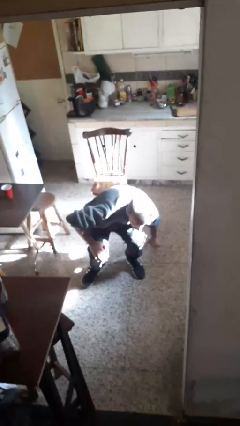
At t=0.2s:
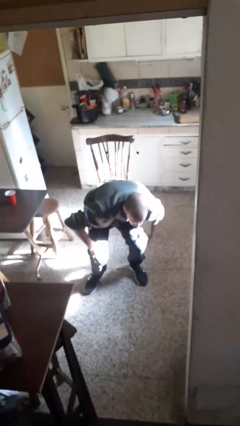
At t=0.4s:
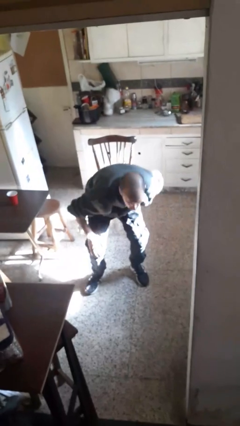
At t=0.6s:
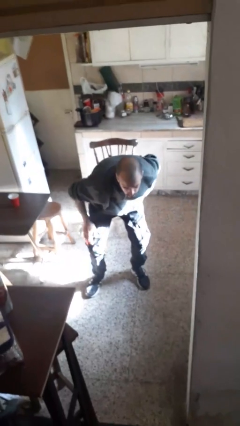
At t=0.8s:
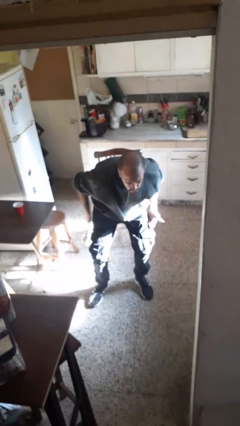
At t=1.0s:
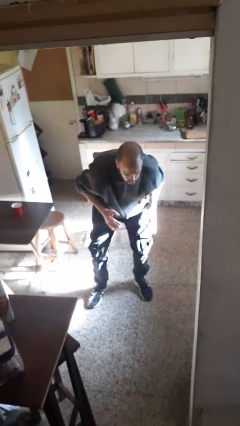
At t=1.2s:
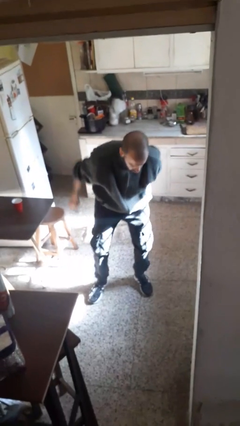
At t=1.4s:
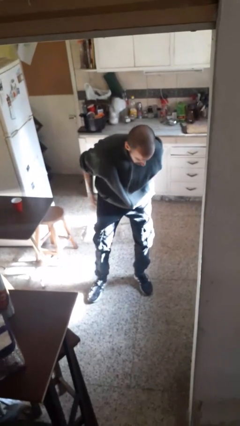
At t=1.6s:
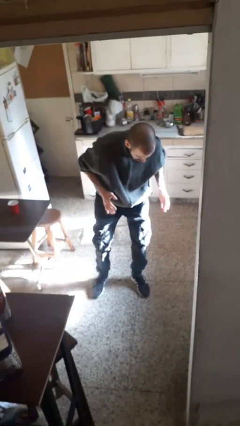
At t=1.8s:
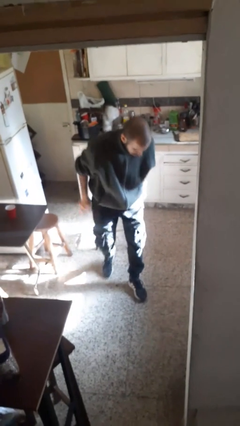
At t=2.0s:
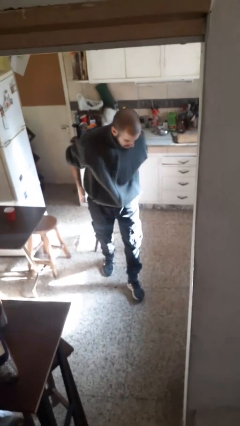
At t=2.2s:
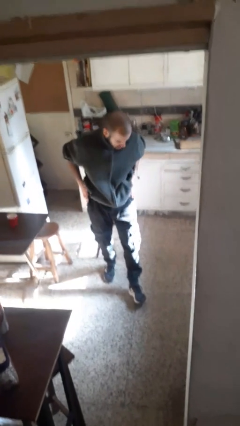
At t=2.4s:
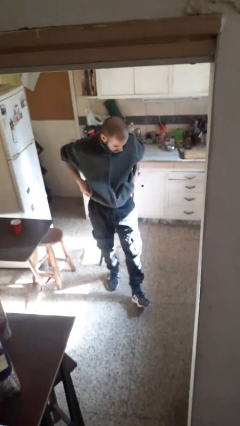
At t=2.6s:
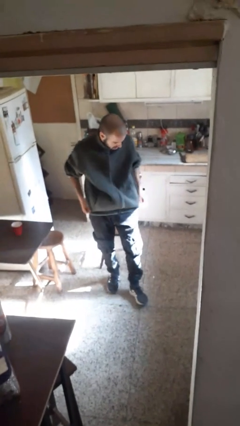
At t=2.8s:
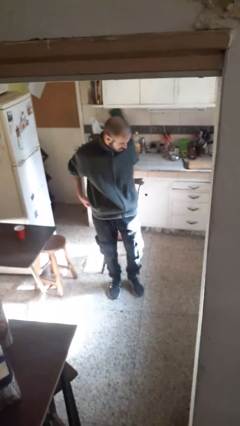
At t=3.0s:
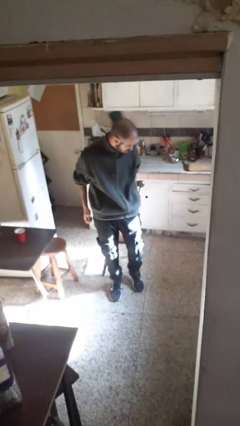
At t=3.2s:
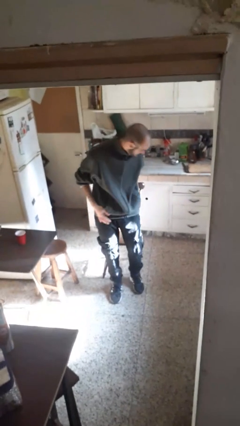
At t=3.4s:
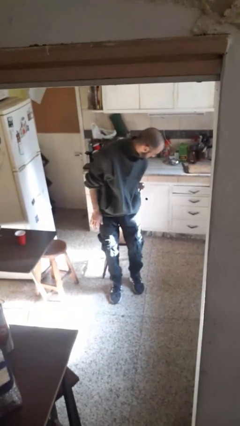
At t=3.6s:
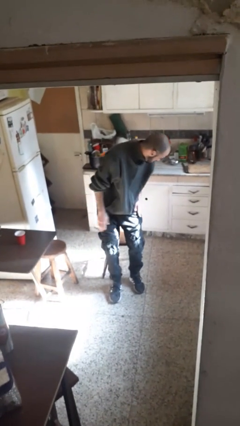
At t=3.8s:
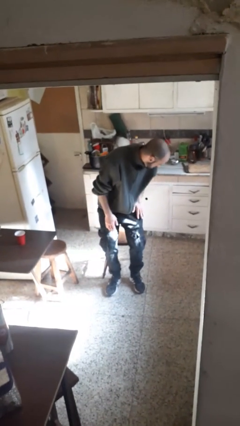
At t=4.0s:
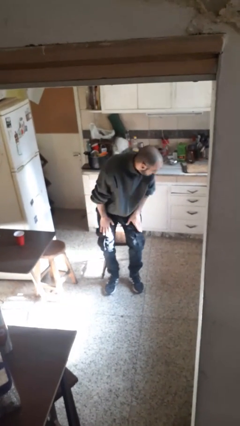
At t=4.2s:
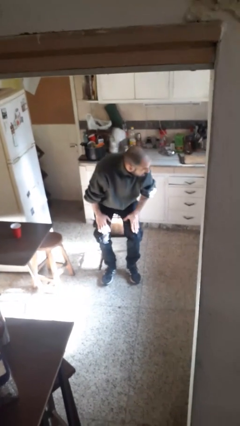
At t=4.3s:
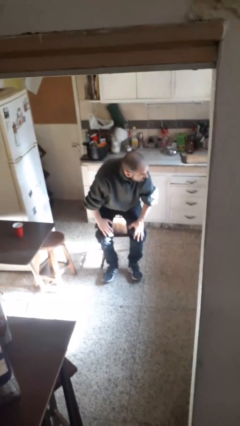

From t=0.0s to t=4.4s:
person stands up from floor

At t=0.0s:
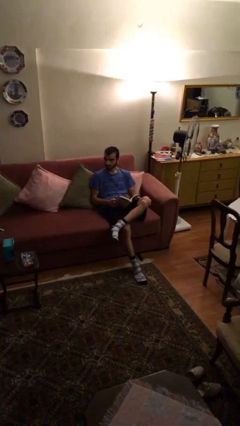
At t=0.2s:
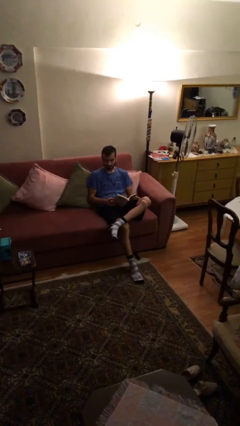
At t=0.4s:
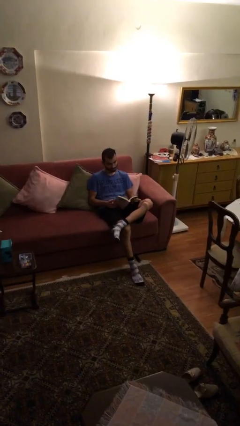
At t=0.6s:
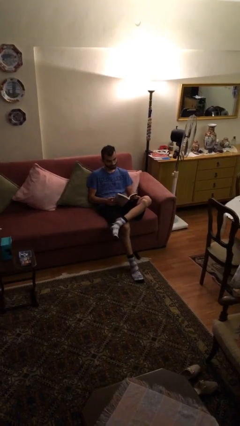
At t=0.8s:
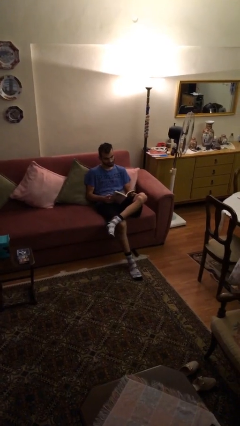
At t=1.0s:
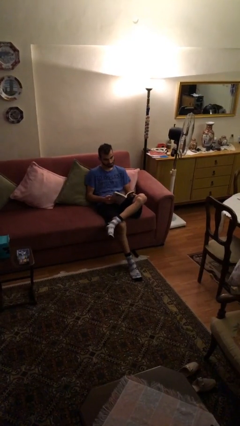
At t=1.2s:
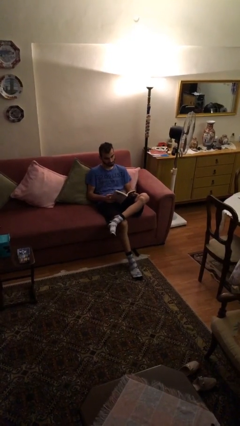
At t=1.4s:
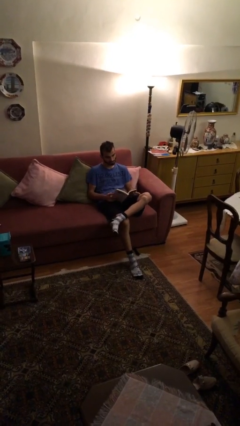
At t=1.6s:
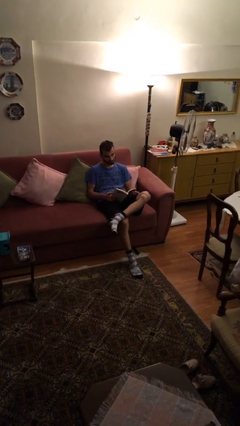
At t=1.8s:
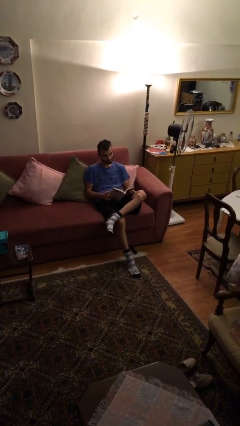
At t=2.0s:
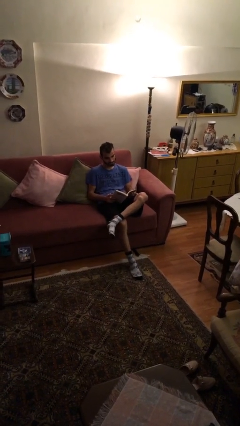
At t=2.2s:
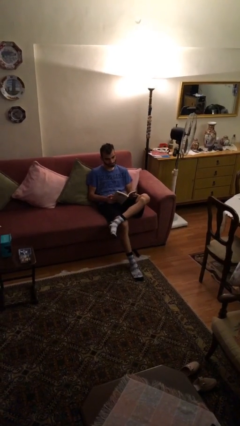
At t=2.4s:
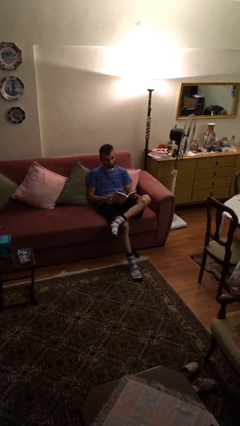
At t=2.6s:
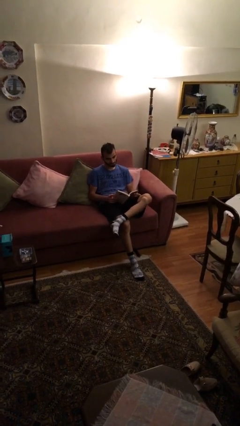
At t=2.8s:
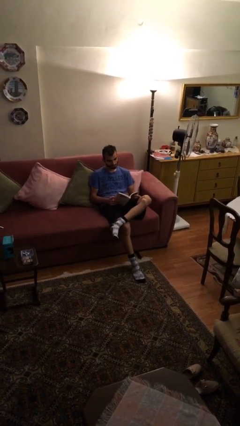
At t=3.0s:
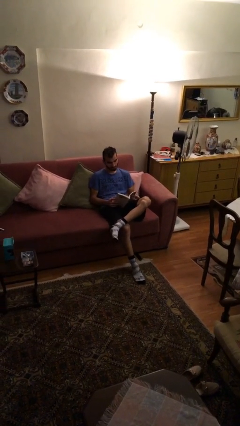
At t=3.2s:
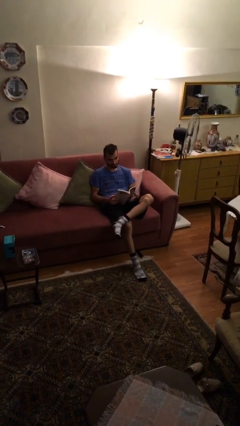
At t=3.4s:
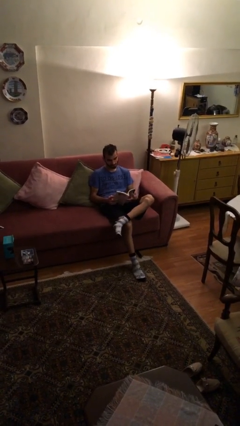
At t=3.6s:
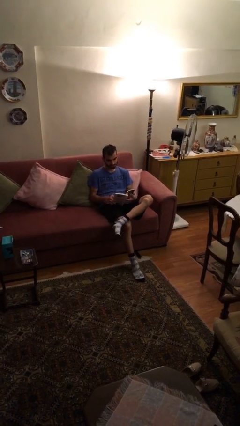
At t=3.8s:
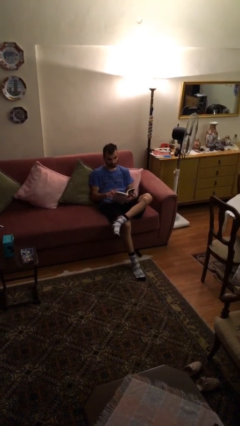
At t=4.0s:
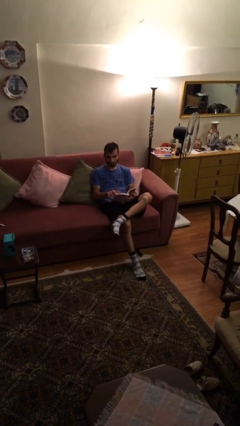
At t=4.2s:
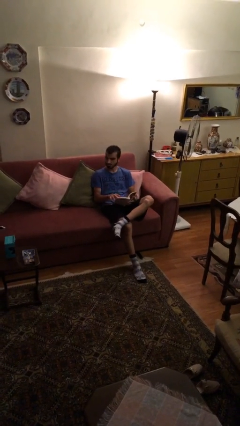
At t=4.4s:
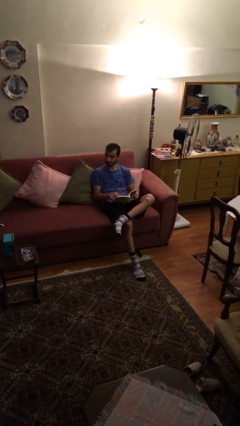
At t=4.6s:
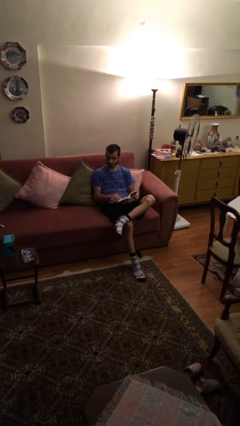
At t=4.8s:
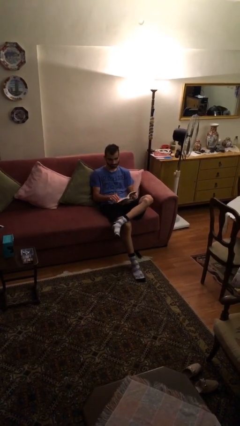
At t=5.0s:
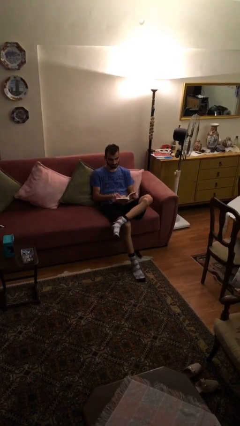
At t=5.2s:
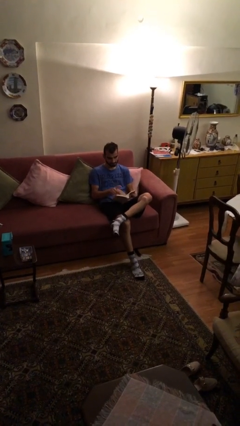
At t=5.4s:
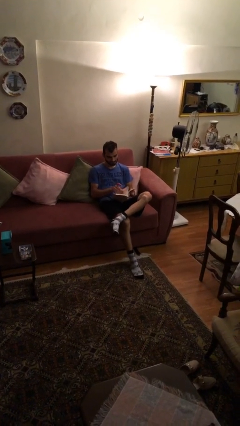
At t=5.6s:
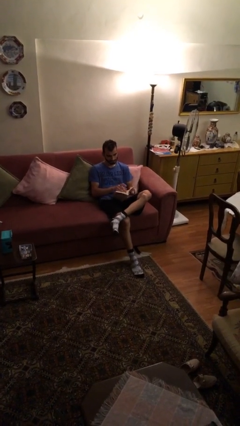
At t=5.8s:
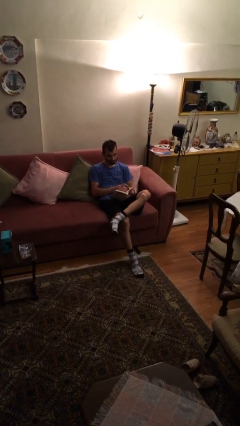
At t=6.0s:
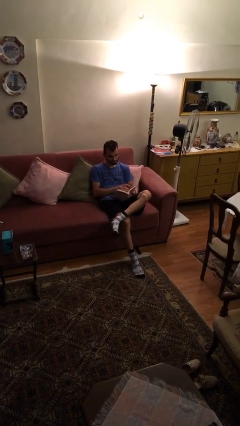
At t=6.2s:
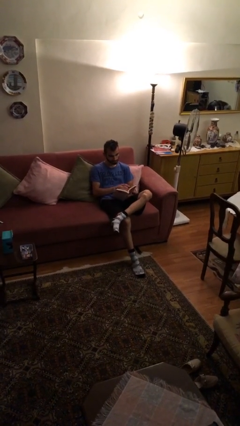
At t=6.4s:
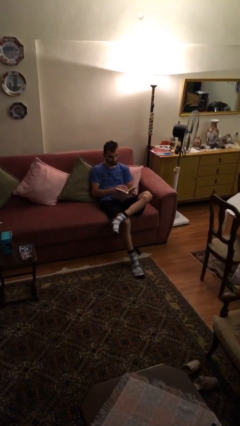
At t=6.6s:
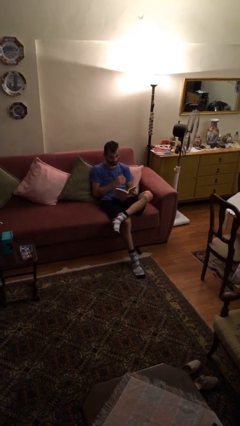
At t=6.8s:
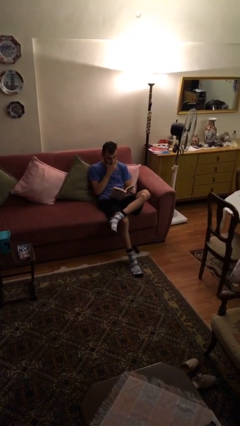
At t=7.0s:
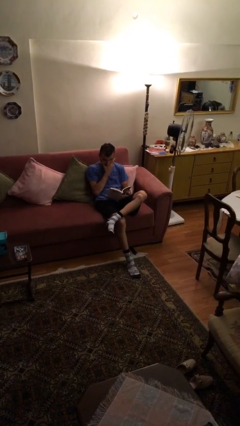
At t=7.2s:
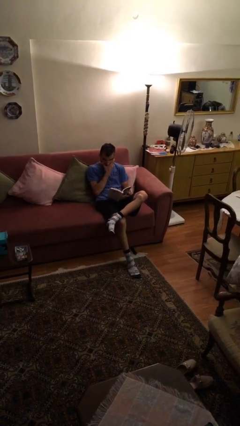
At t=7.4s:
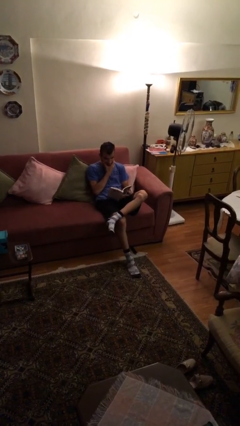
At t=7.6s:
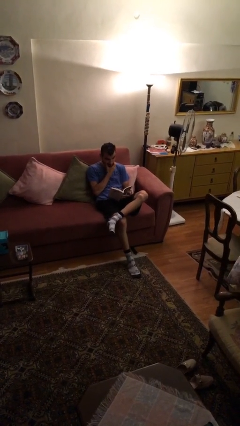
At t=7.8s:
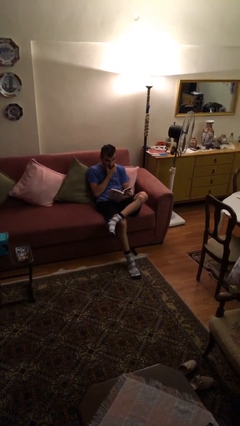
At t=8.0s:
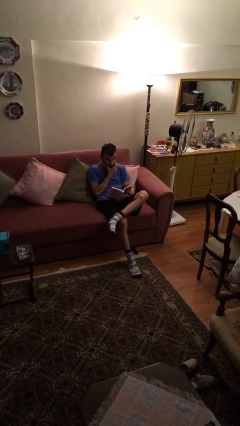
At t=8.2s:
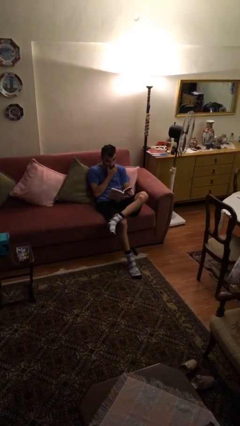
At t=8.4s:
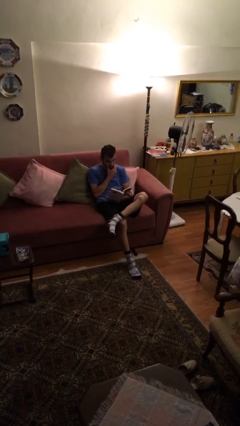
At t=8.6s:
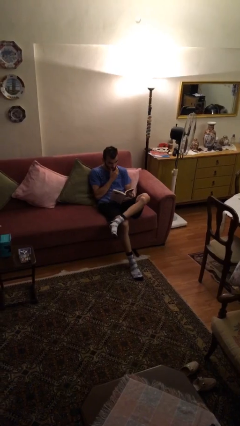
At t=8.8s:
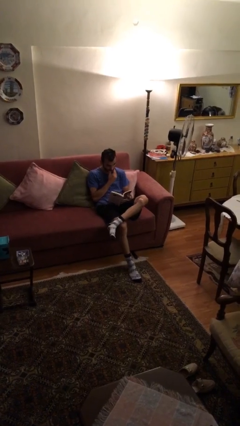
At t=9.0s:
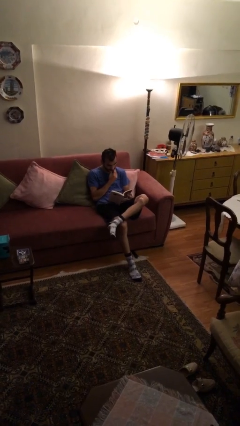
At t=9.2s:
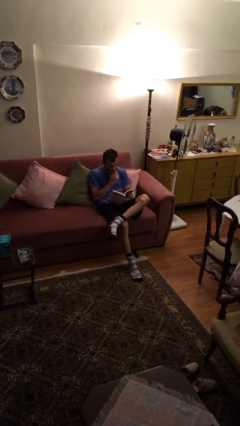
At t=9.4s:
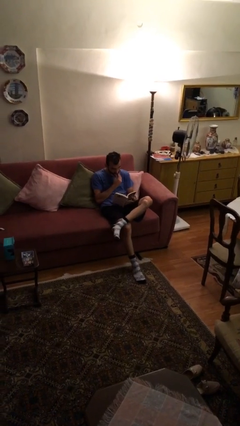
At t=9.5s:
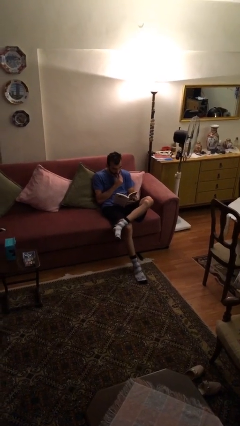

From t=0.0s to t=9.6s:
person reads document

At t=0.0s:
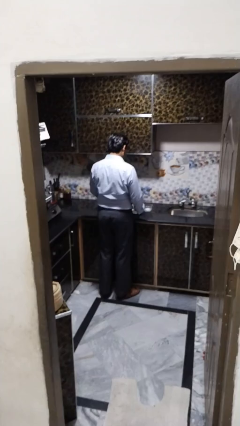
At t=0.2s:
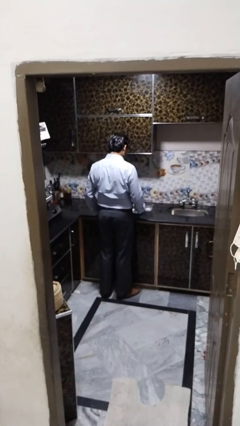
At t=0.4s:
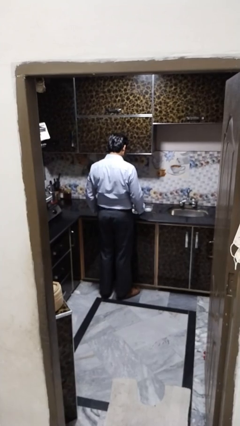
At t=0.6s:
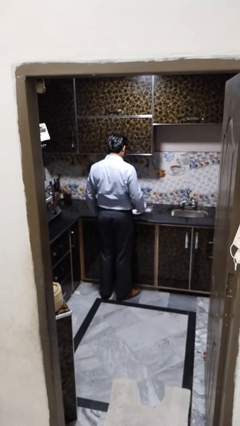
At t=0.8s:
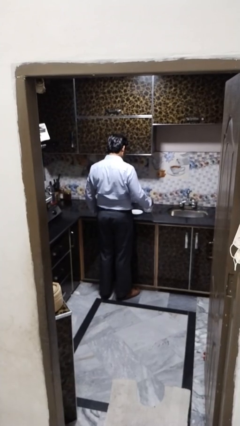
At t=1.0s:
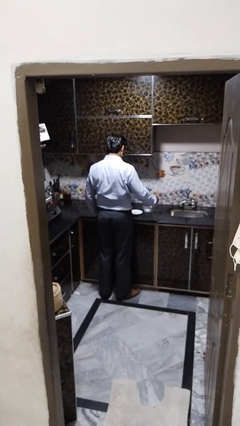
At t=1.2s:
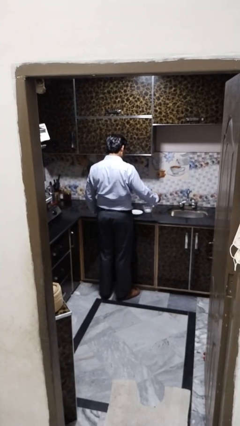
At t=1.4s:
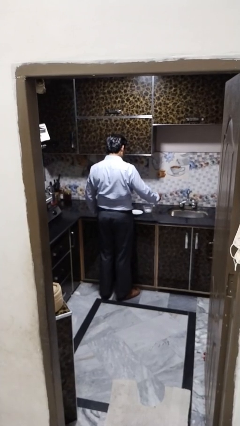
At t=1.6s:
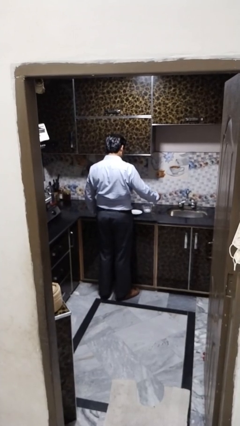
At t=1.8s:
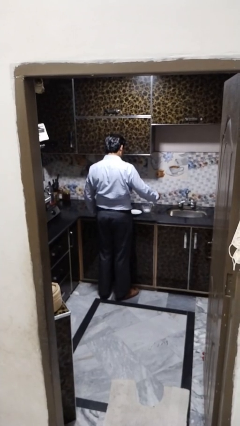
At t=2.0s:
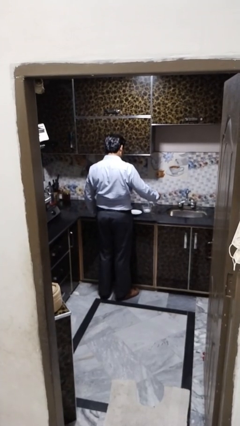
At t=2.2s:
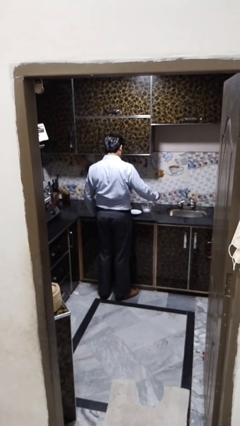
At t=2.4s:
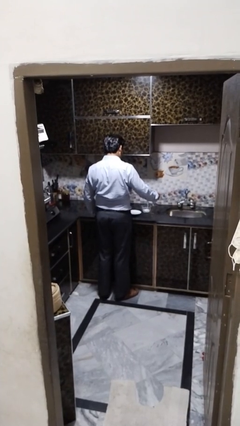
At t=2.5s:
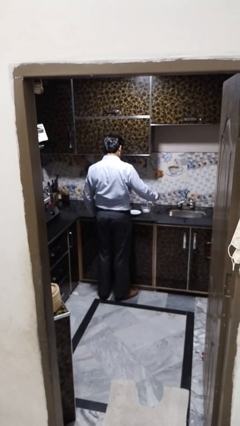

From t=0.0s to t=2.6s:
person pours into bowl

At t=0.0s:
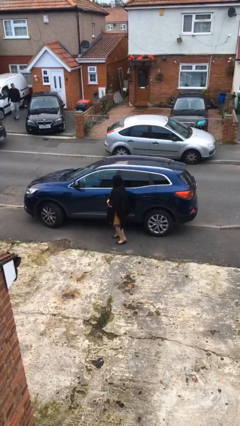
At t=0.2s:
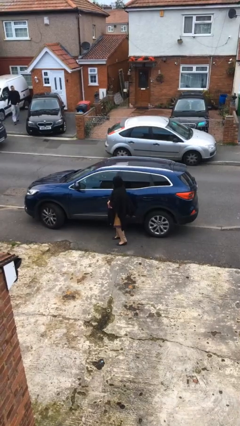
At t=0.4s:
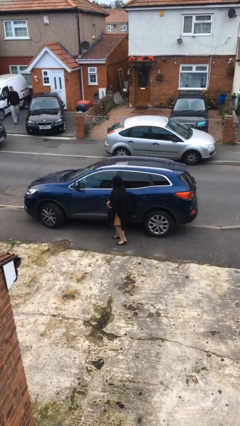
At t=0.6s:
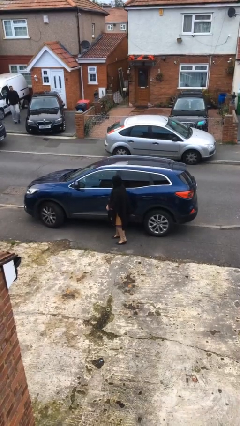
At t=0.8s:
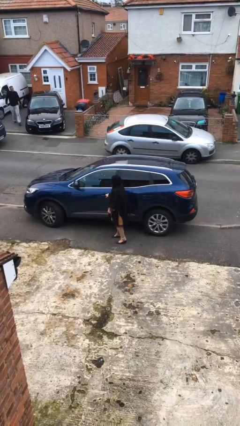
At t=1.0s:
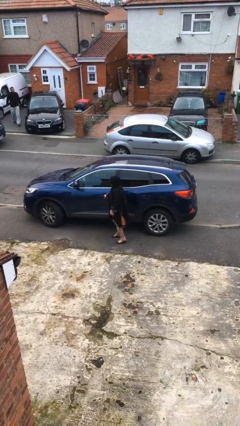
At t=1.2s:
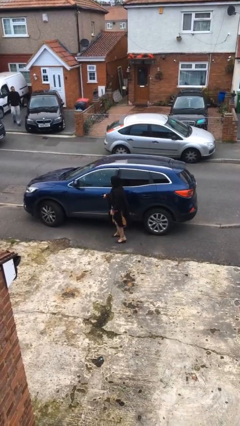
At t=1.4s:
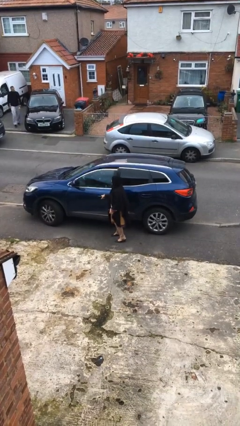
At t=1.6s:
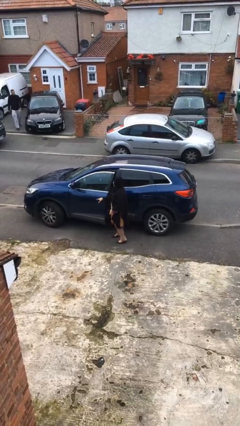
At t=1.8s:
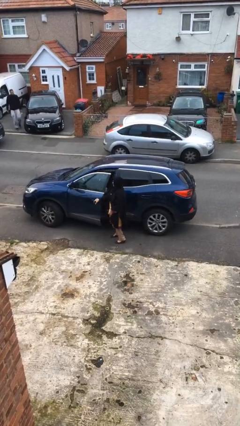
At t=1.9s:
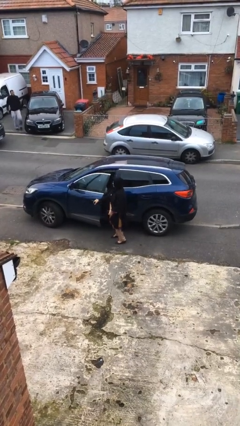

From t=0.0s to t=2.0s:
person opens car door
